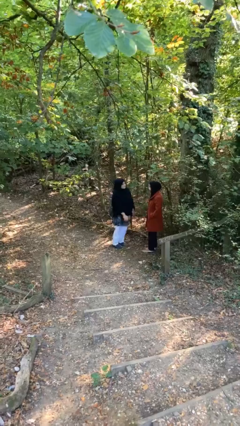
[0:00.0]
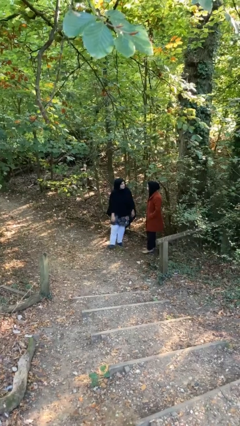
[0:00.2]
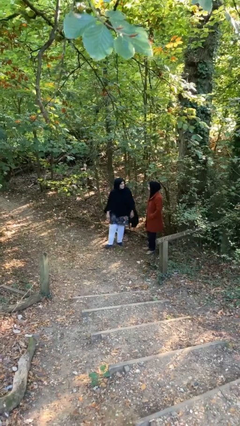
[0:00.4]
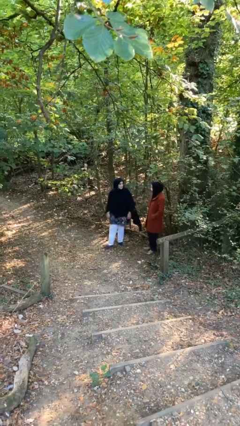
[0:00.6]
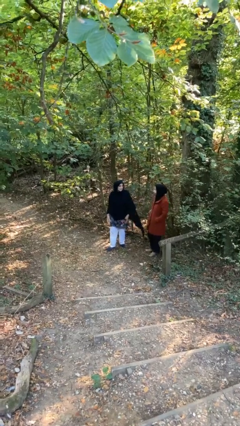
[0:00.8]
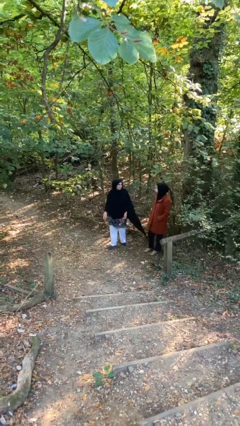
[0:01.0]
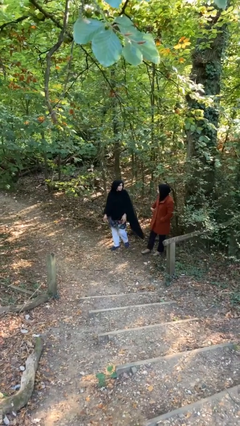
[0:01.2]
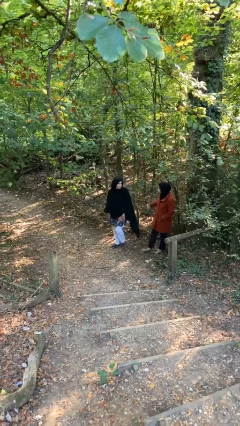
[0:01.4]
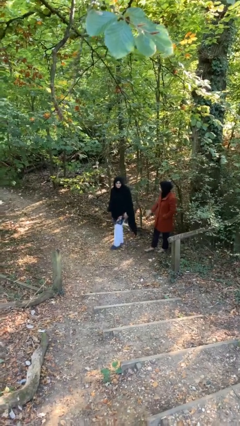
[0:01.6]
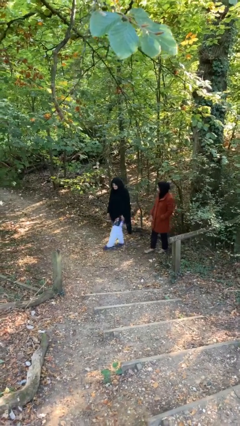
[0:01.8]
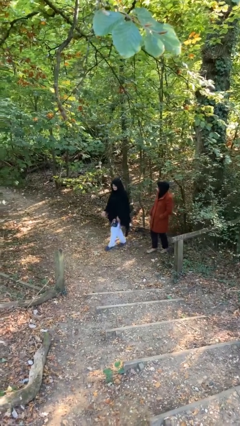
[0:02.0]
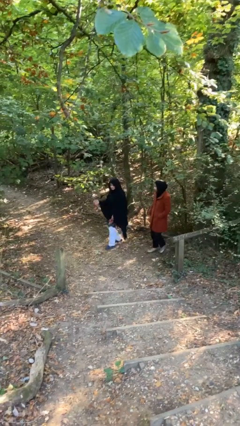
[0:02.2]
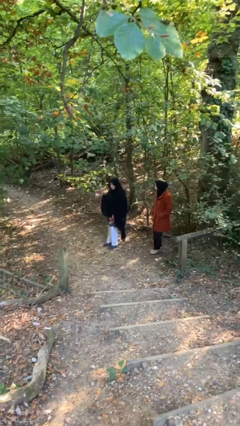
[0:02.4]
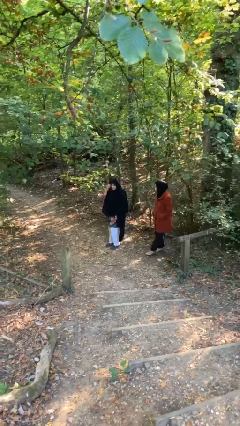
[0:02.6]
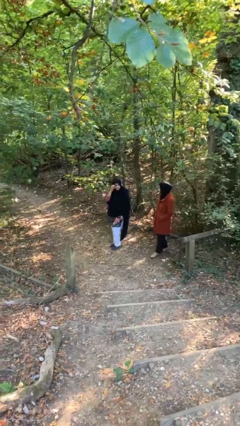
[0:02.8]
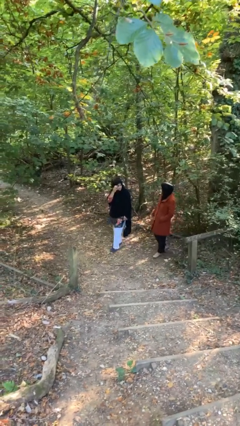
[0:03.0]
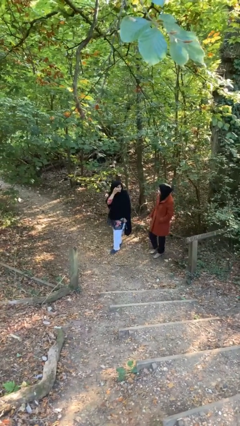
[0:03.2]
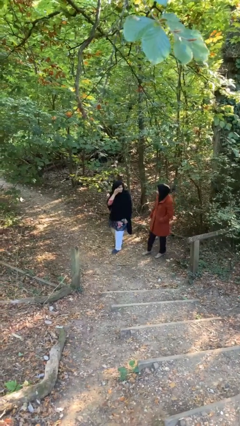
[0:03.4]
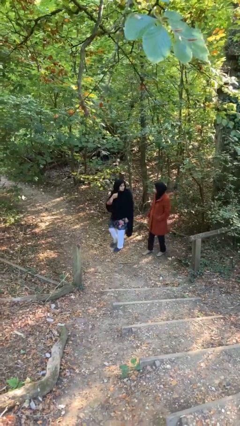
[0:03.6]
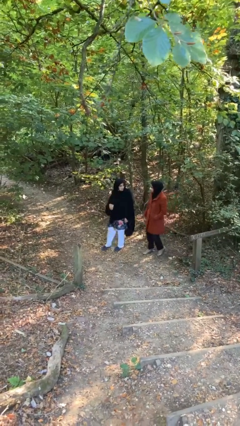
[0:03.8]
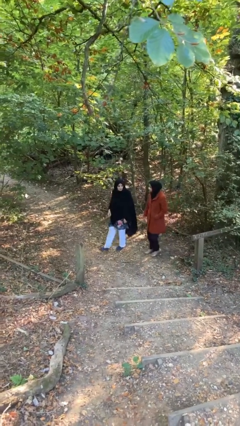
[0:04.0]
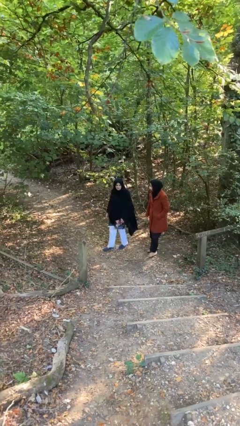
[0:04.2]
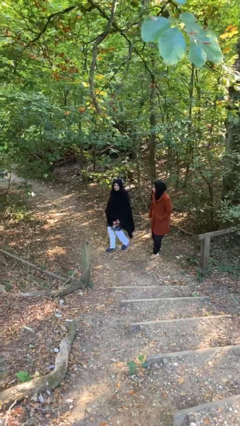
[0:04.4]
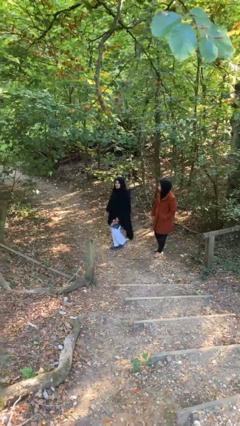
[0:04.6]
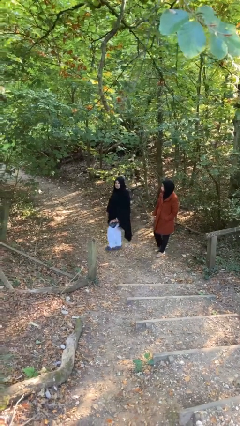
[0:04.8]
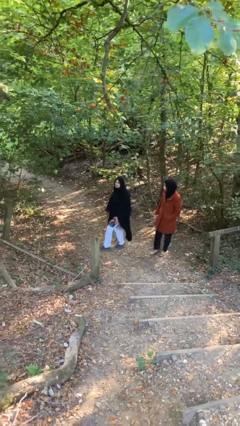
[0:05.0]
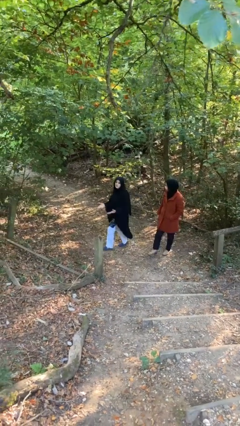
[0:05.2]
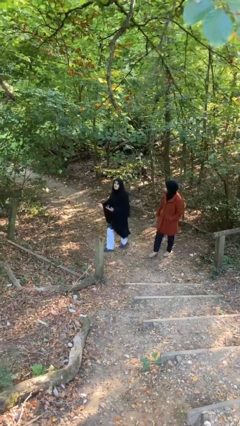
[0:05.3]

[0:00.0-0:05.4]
person talks to person

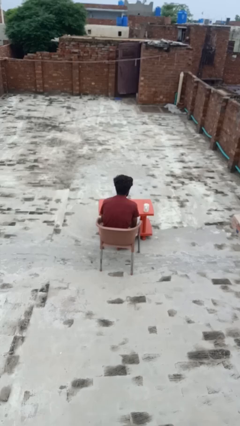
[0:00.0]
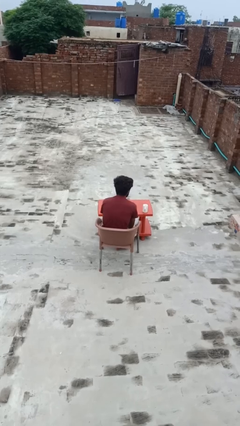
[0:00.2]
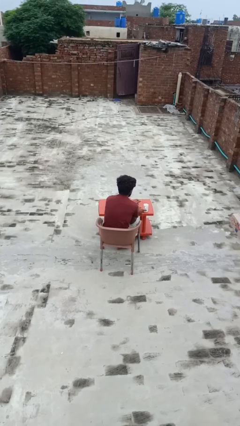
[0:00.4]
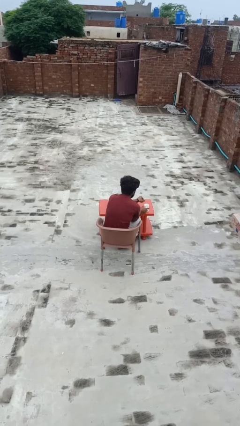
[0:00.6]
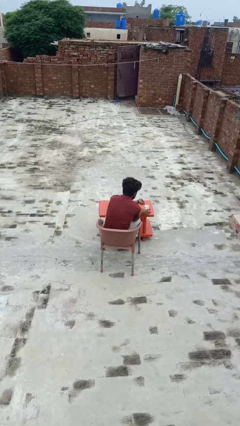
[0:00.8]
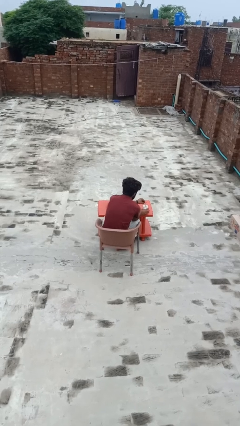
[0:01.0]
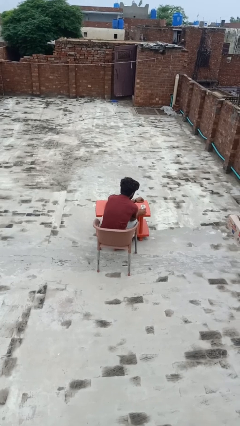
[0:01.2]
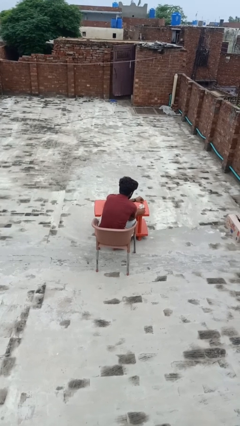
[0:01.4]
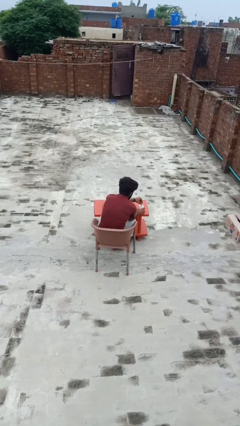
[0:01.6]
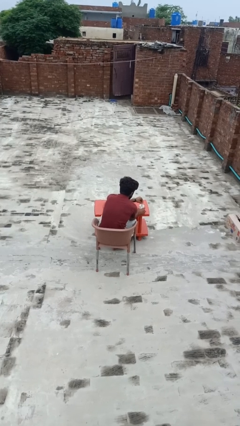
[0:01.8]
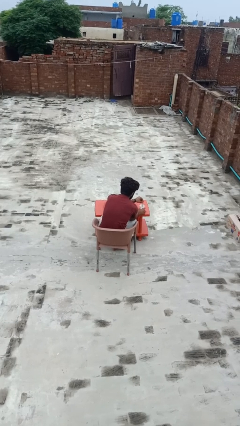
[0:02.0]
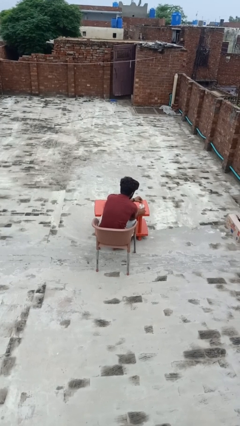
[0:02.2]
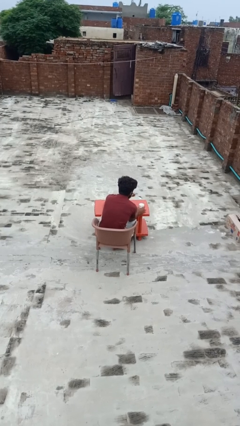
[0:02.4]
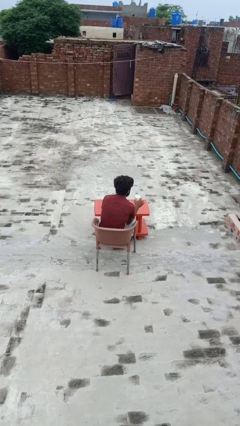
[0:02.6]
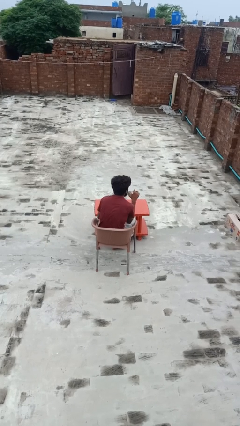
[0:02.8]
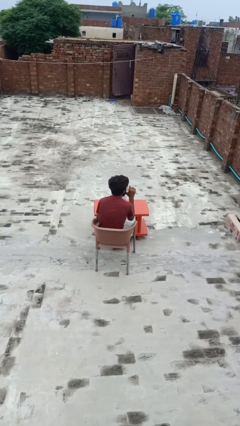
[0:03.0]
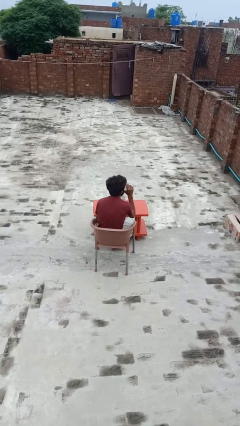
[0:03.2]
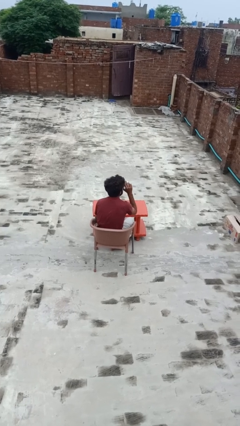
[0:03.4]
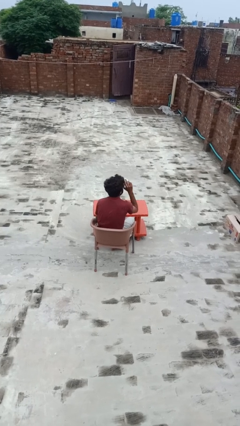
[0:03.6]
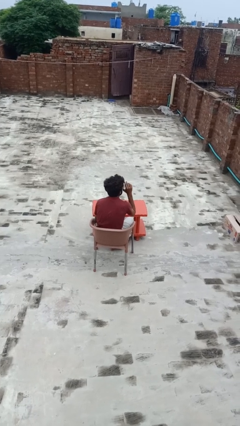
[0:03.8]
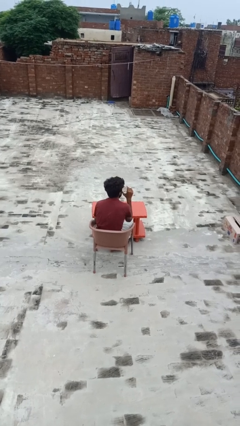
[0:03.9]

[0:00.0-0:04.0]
person stirs mug

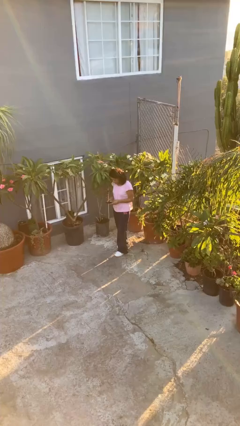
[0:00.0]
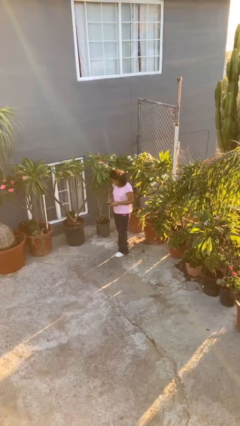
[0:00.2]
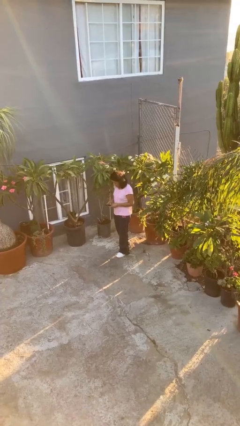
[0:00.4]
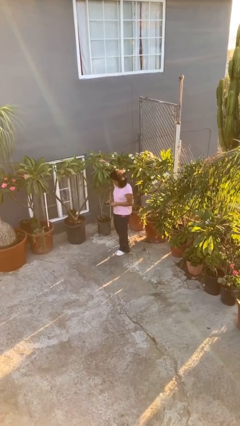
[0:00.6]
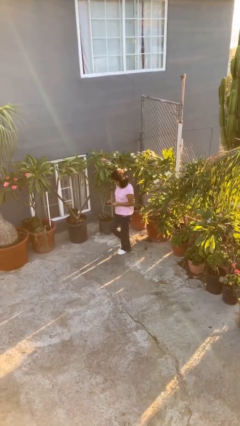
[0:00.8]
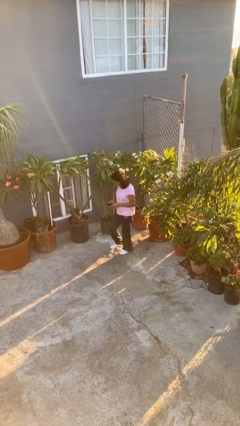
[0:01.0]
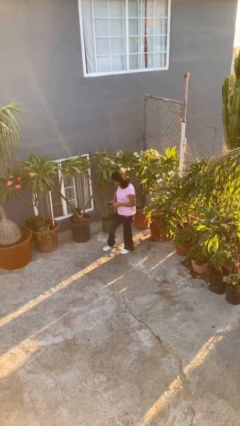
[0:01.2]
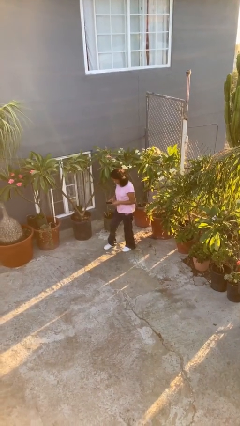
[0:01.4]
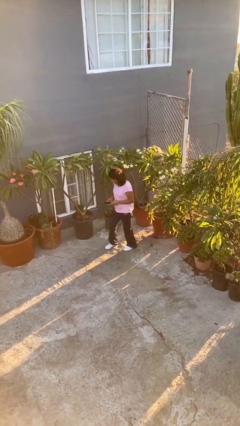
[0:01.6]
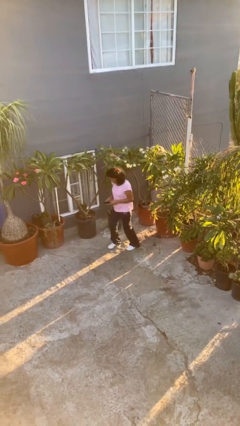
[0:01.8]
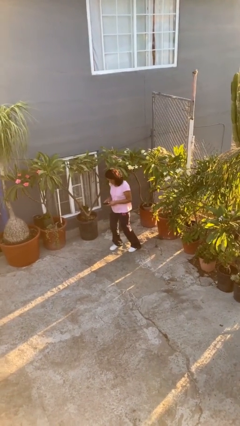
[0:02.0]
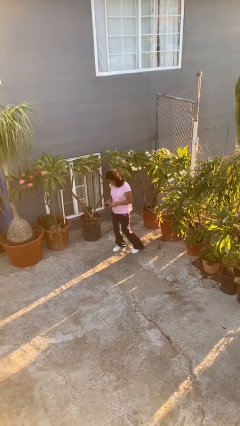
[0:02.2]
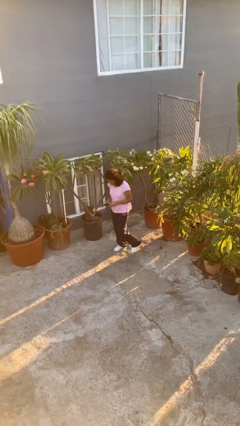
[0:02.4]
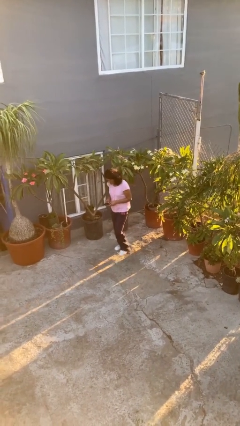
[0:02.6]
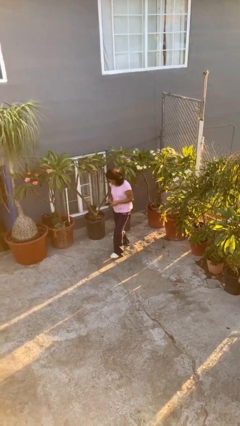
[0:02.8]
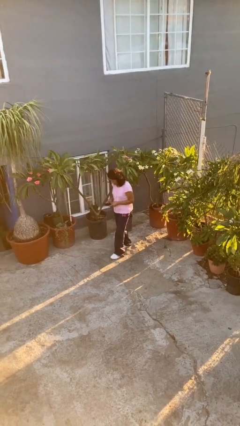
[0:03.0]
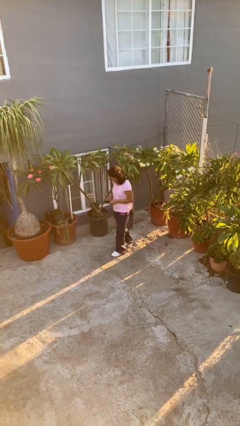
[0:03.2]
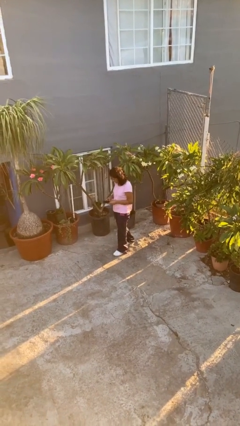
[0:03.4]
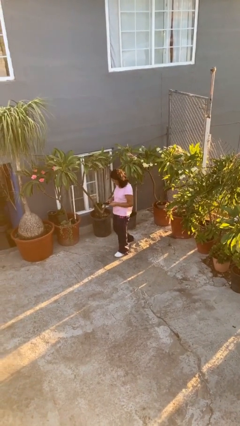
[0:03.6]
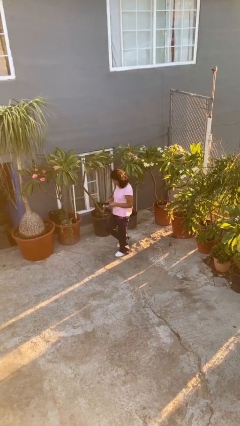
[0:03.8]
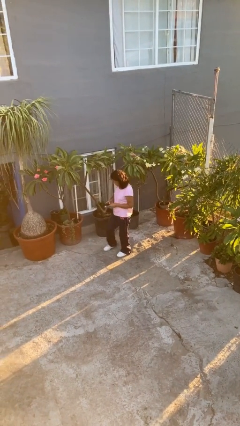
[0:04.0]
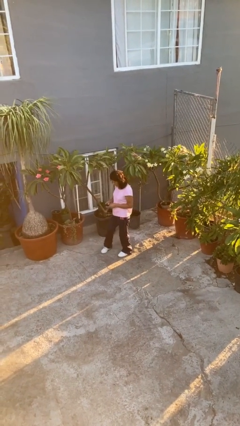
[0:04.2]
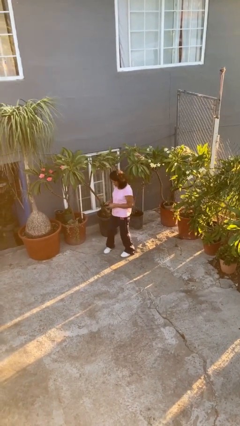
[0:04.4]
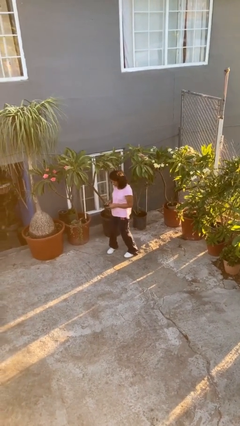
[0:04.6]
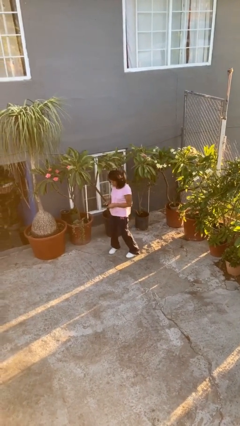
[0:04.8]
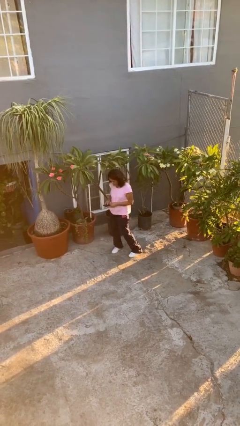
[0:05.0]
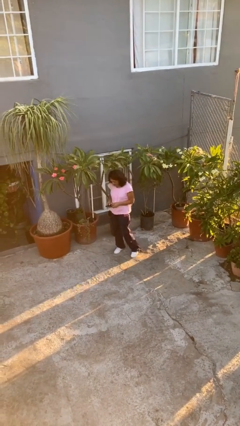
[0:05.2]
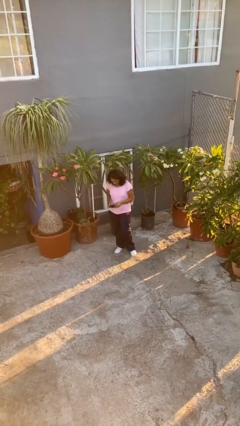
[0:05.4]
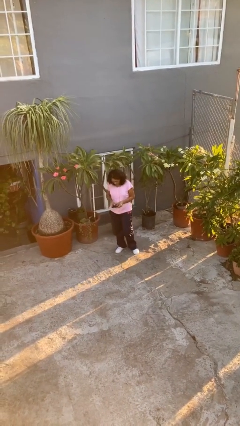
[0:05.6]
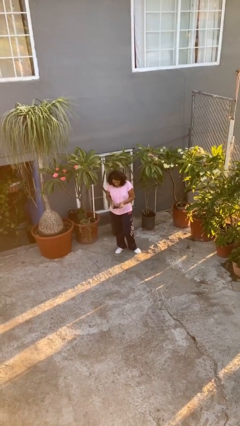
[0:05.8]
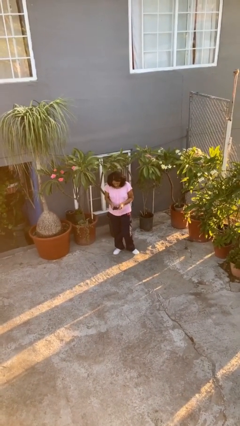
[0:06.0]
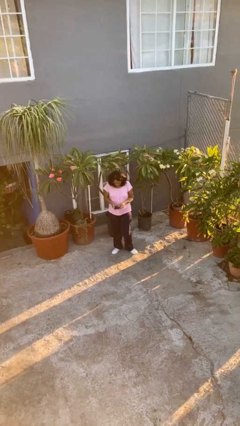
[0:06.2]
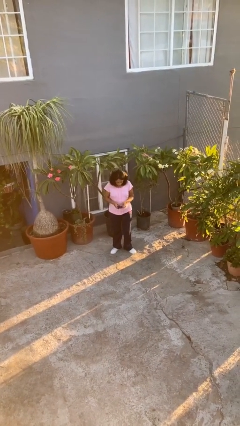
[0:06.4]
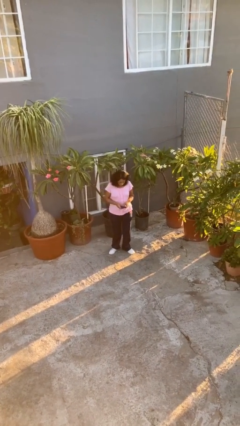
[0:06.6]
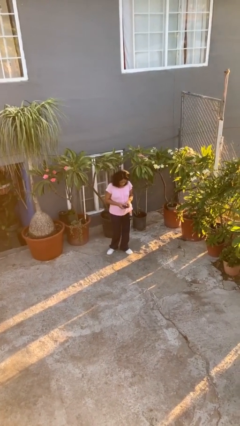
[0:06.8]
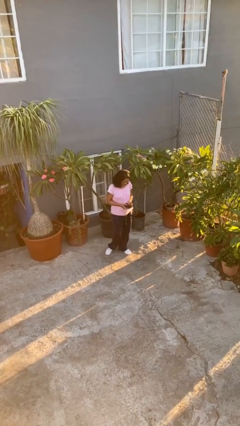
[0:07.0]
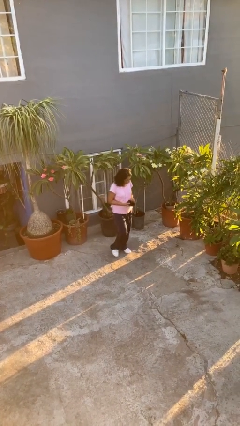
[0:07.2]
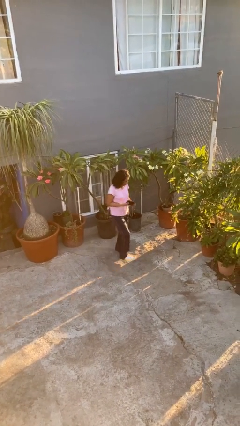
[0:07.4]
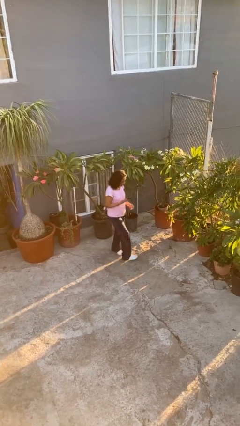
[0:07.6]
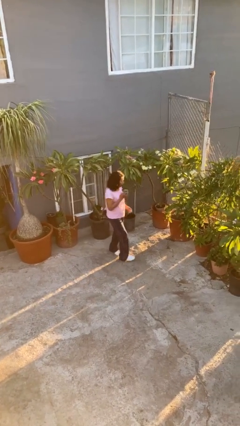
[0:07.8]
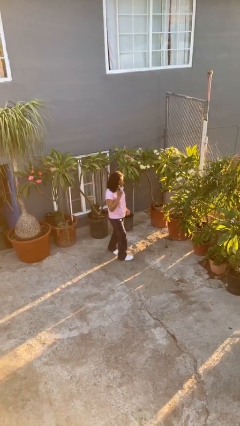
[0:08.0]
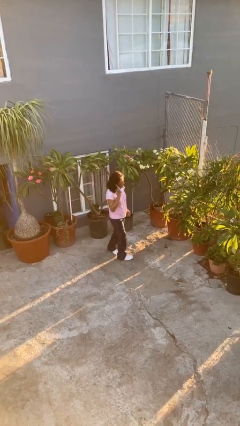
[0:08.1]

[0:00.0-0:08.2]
person texts on phone

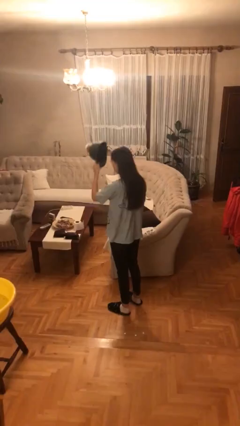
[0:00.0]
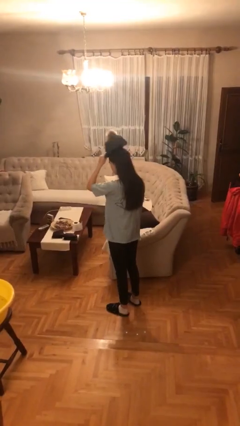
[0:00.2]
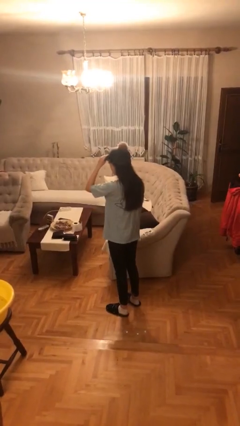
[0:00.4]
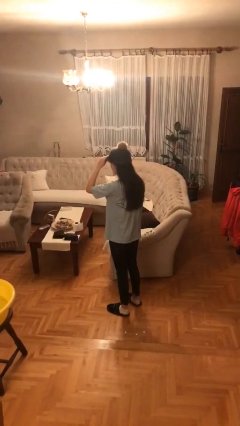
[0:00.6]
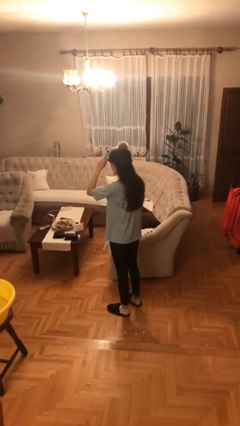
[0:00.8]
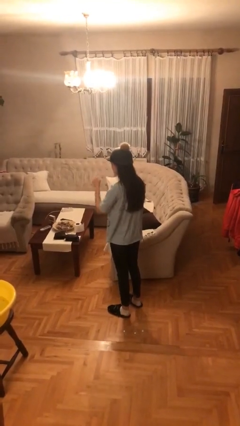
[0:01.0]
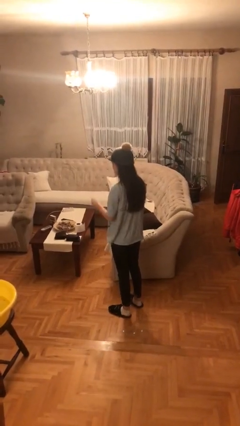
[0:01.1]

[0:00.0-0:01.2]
person puts on hat
